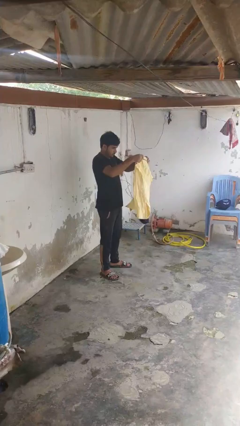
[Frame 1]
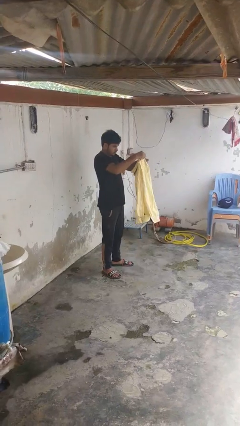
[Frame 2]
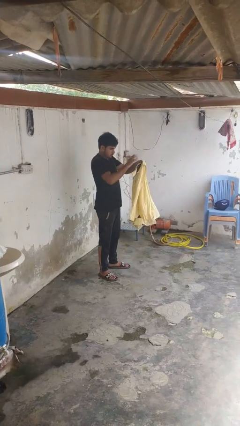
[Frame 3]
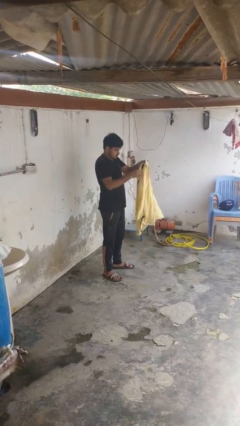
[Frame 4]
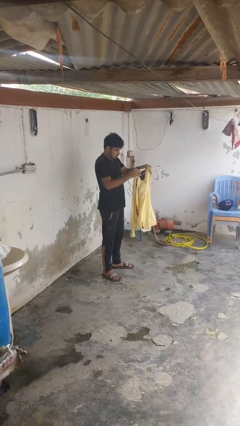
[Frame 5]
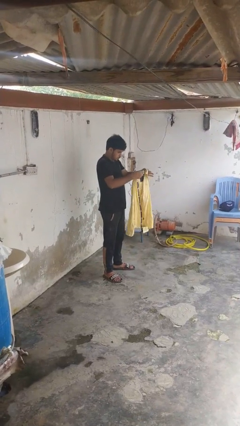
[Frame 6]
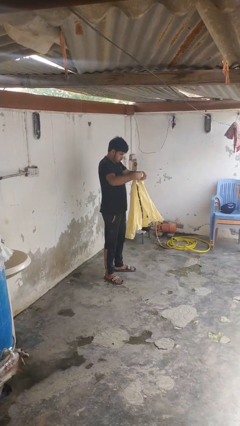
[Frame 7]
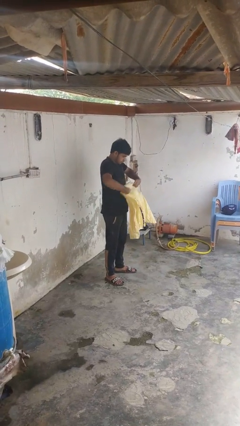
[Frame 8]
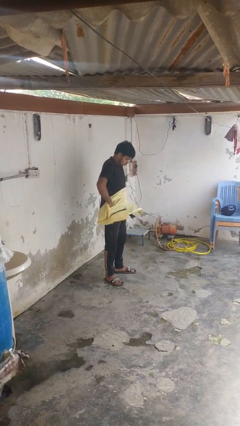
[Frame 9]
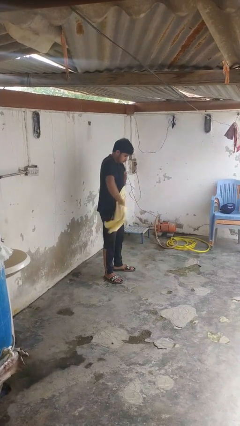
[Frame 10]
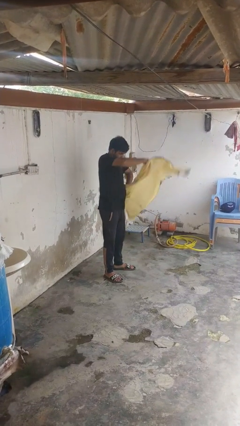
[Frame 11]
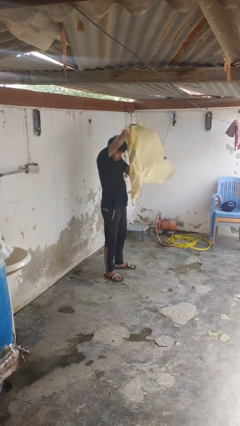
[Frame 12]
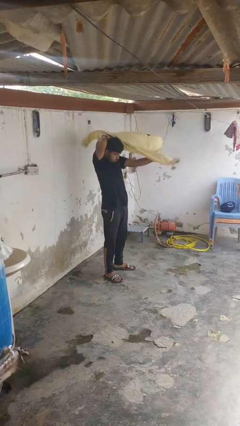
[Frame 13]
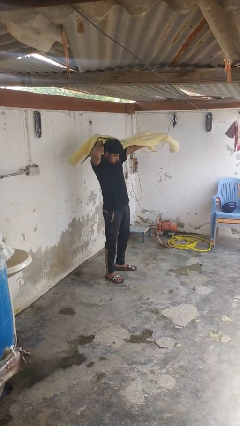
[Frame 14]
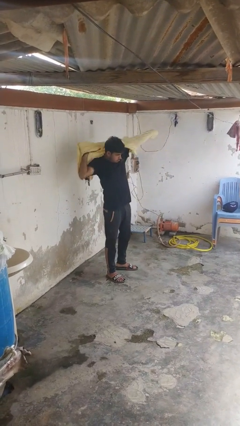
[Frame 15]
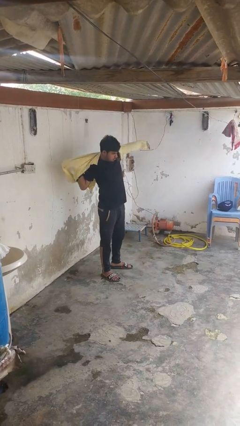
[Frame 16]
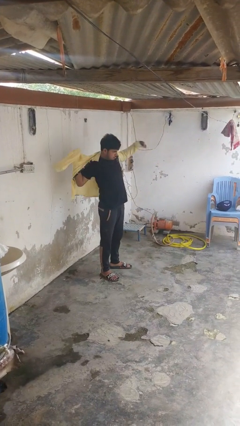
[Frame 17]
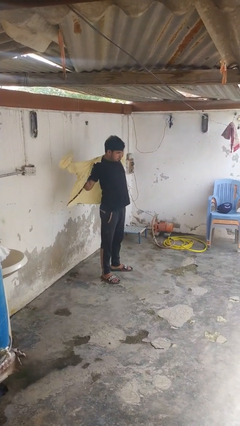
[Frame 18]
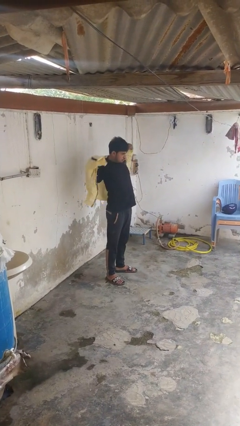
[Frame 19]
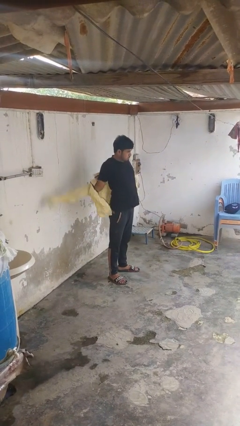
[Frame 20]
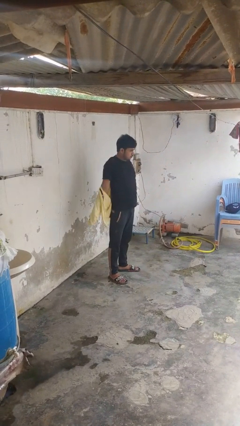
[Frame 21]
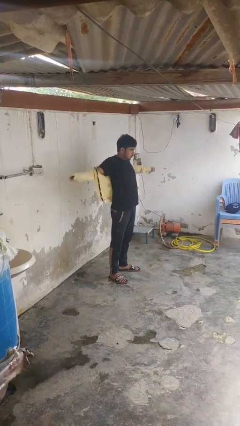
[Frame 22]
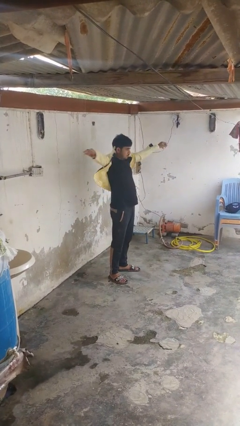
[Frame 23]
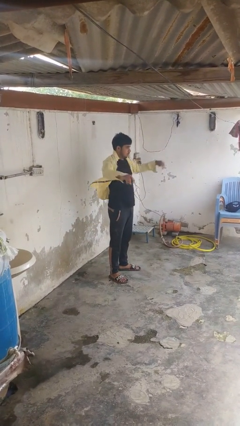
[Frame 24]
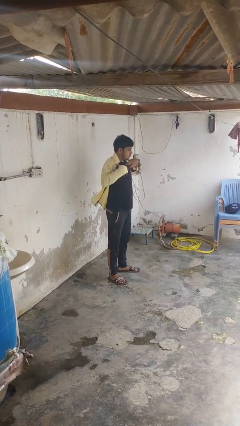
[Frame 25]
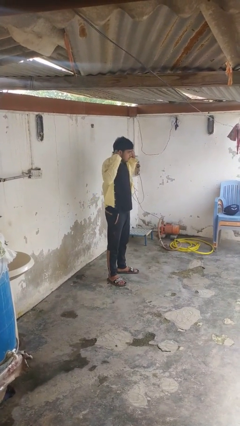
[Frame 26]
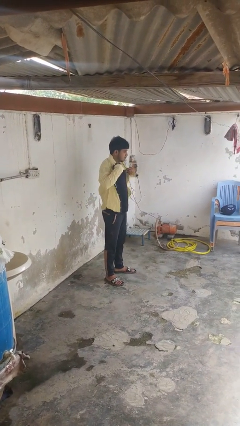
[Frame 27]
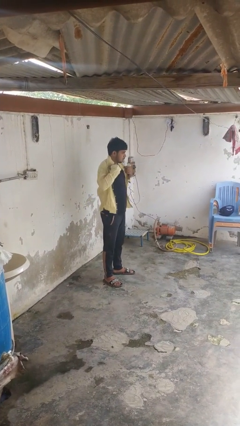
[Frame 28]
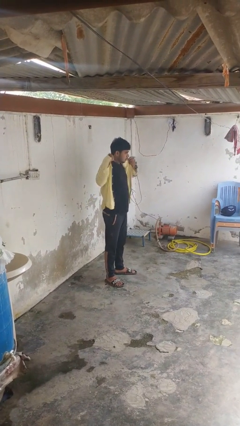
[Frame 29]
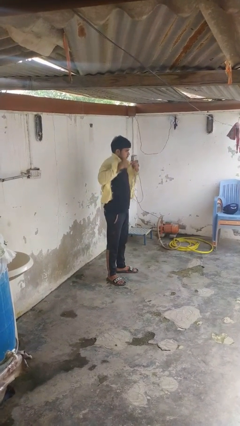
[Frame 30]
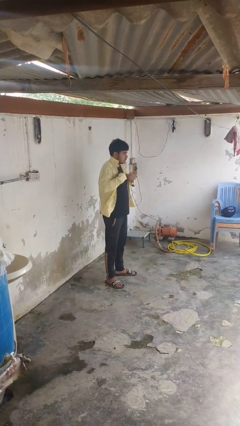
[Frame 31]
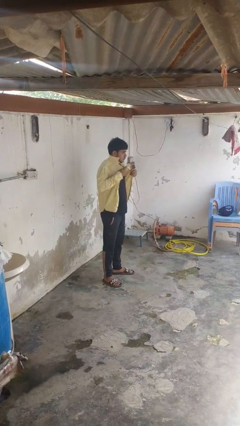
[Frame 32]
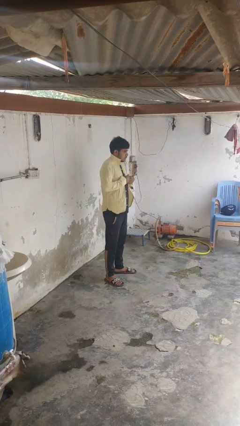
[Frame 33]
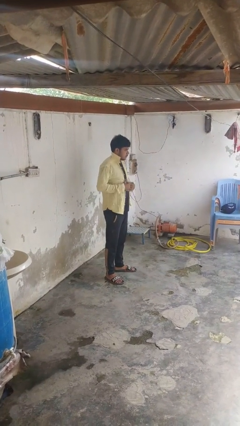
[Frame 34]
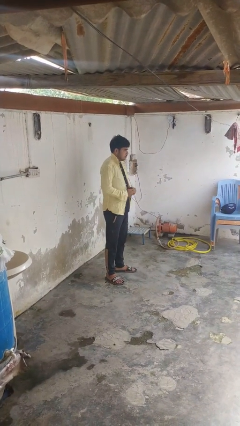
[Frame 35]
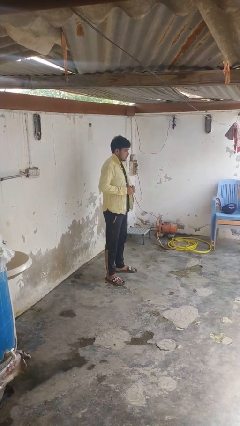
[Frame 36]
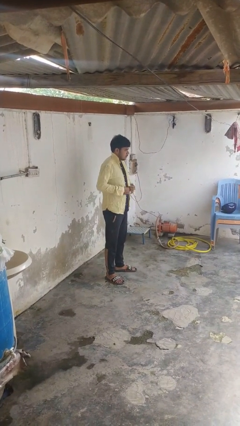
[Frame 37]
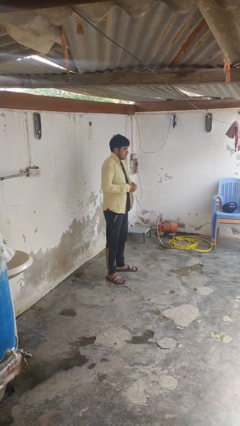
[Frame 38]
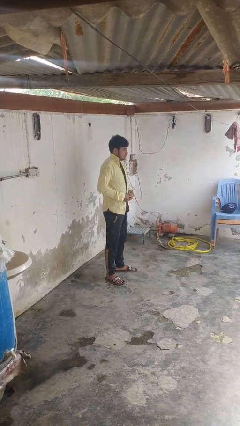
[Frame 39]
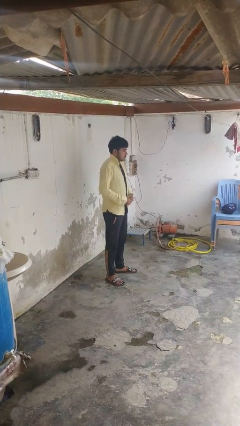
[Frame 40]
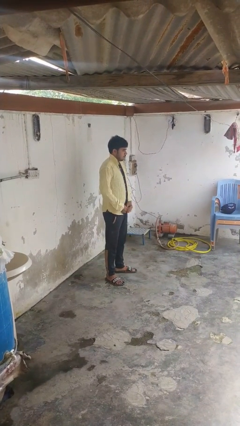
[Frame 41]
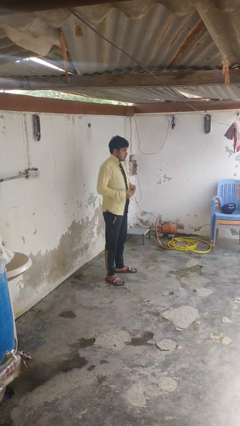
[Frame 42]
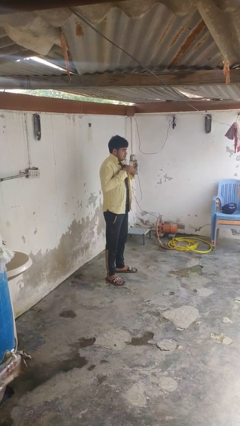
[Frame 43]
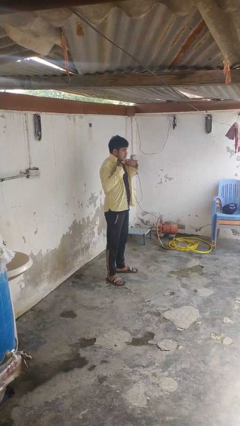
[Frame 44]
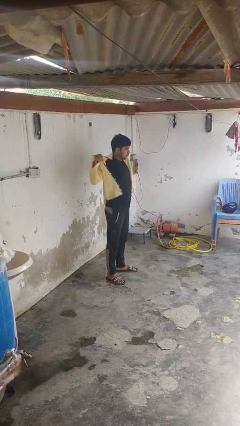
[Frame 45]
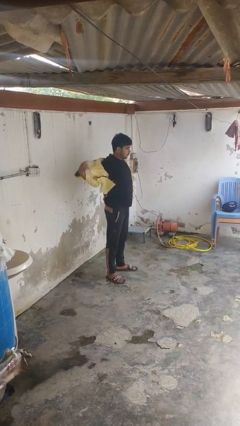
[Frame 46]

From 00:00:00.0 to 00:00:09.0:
person puts on shirt

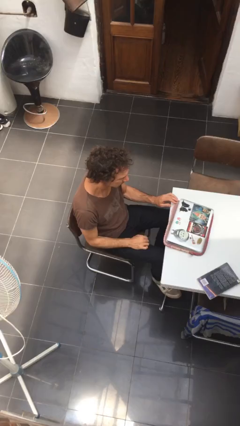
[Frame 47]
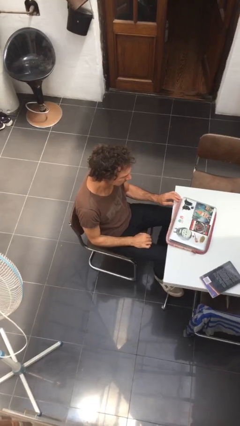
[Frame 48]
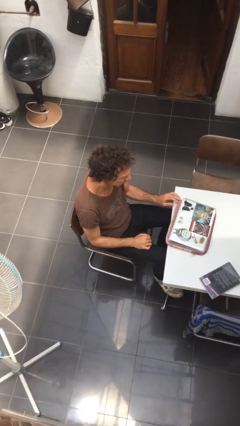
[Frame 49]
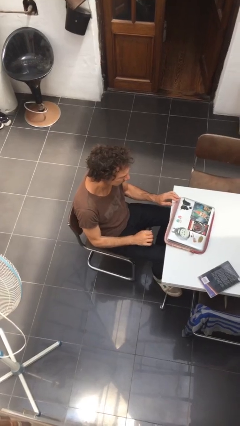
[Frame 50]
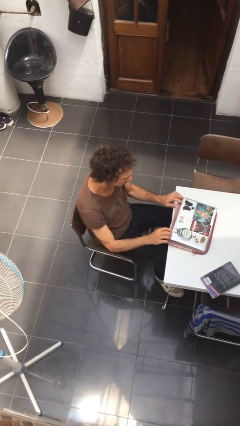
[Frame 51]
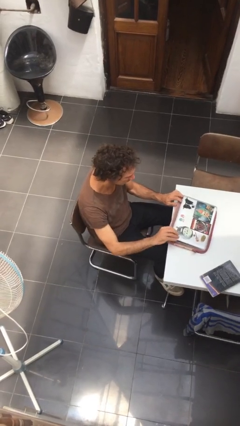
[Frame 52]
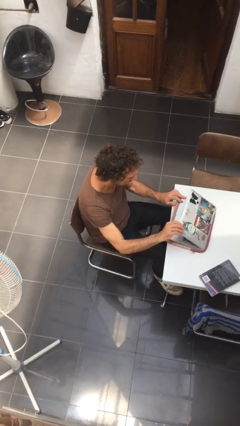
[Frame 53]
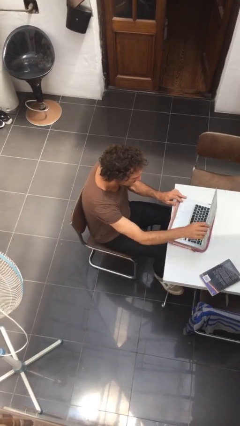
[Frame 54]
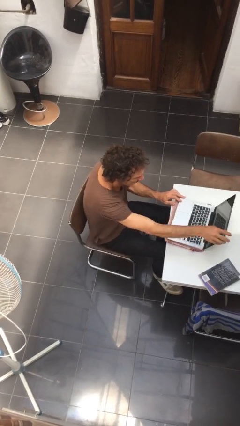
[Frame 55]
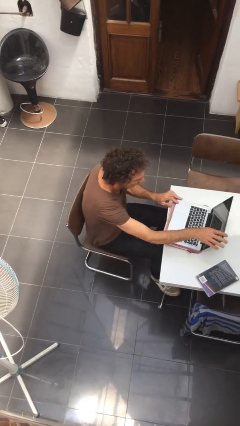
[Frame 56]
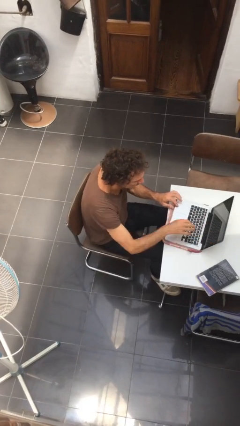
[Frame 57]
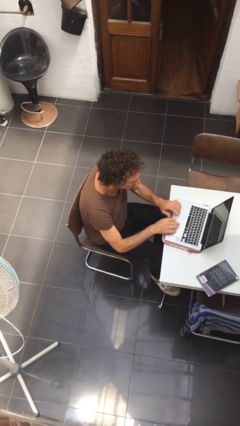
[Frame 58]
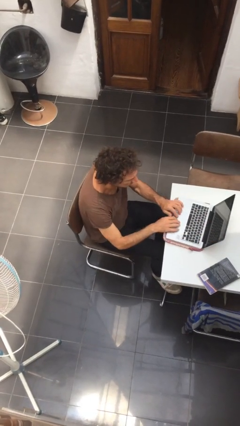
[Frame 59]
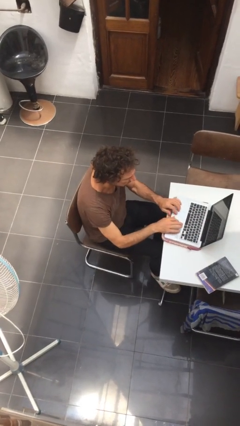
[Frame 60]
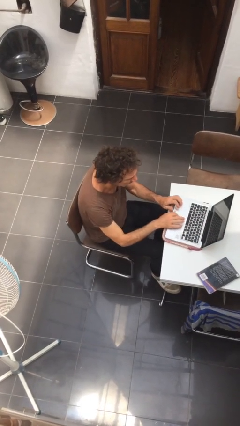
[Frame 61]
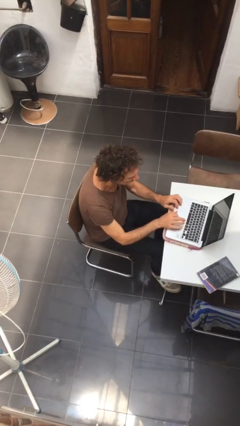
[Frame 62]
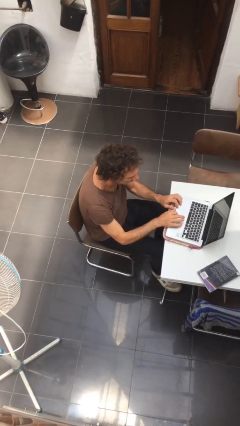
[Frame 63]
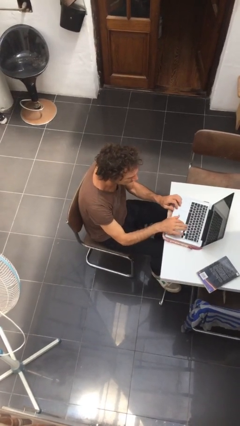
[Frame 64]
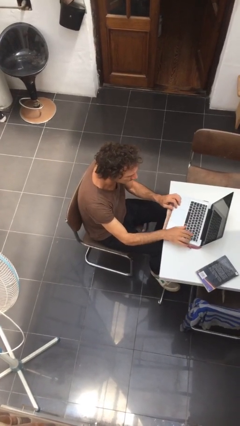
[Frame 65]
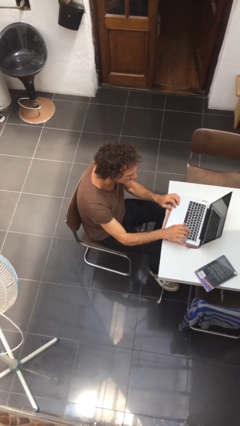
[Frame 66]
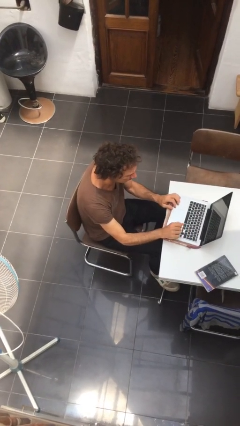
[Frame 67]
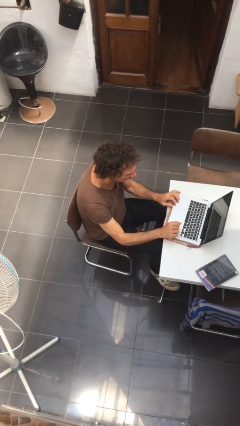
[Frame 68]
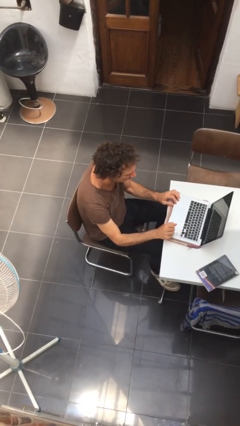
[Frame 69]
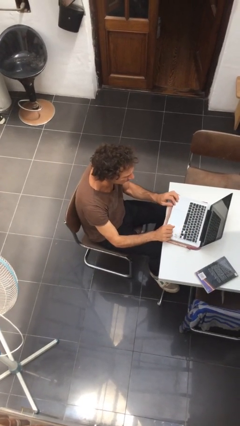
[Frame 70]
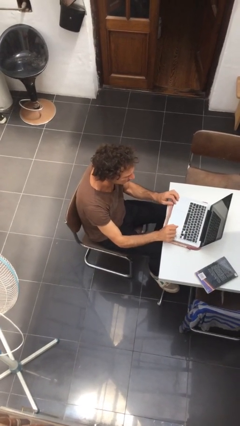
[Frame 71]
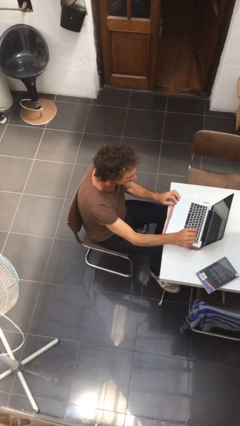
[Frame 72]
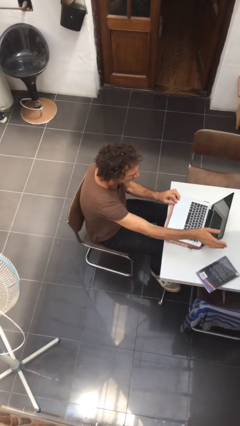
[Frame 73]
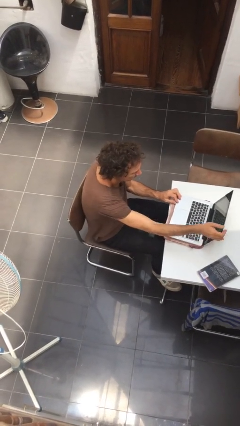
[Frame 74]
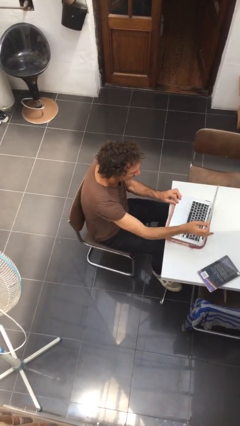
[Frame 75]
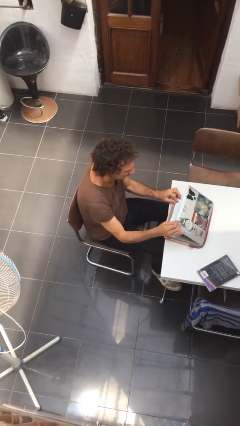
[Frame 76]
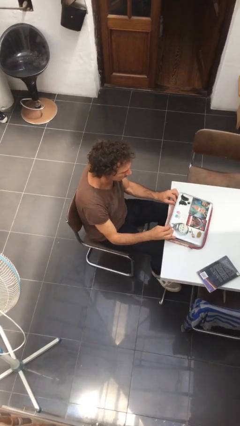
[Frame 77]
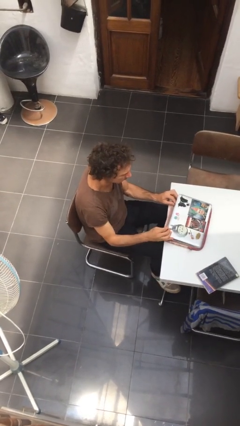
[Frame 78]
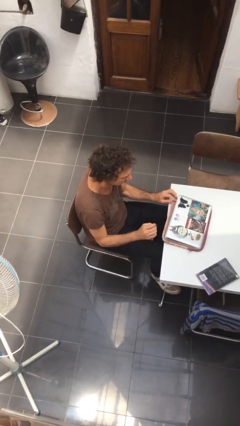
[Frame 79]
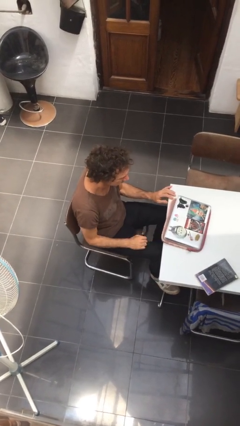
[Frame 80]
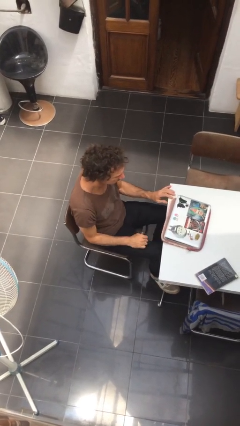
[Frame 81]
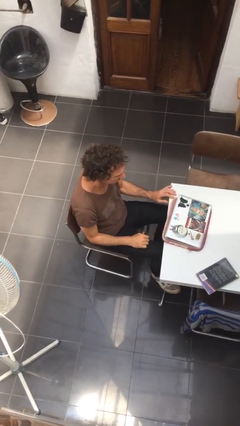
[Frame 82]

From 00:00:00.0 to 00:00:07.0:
person interacts with laptop

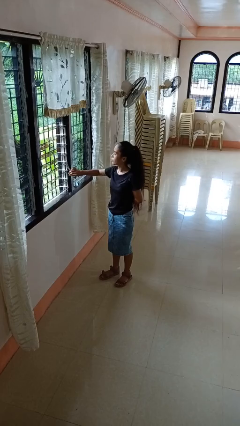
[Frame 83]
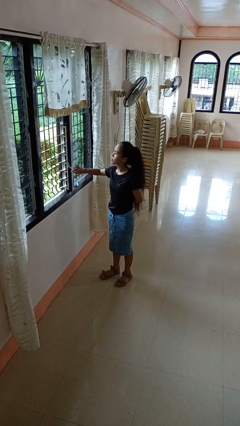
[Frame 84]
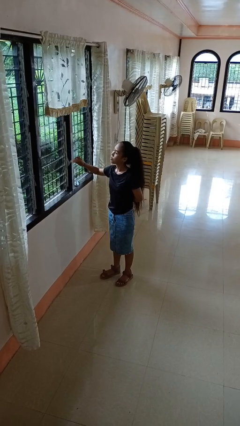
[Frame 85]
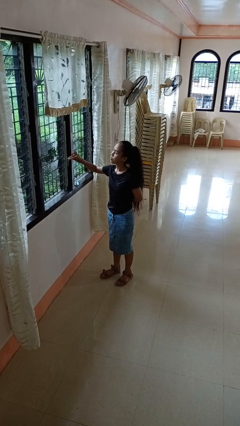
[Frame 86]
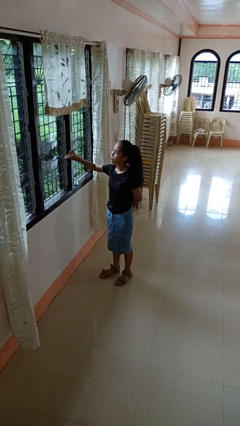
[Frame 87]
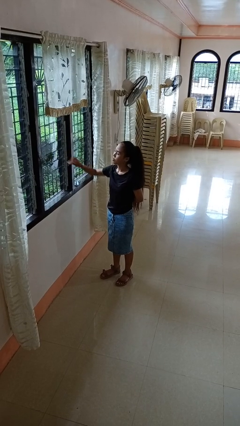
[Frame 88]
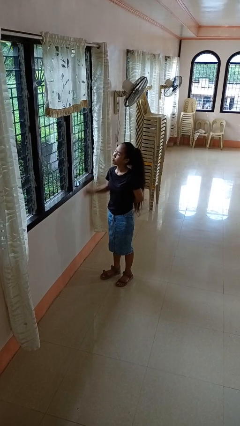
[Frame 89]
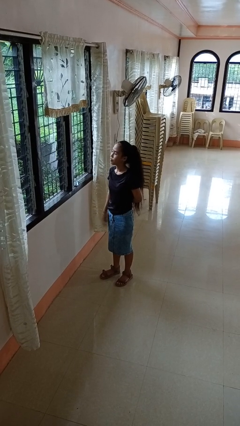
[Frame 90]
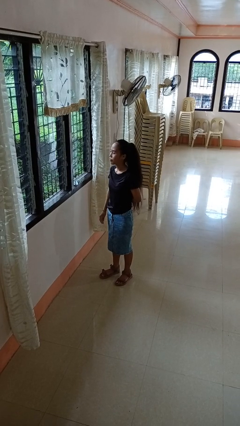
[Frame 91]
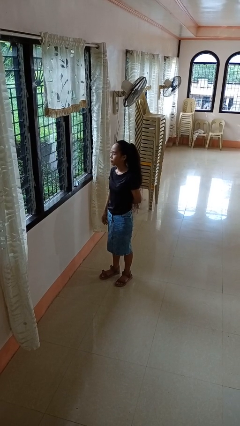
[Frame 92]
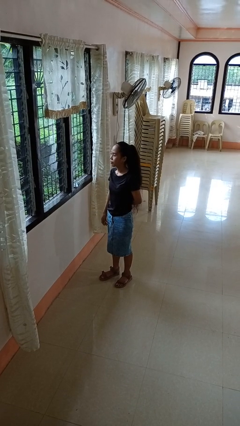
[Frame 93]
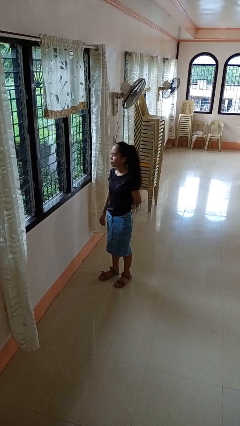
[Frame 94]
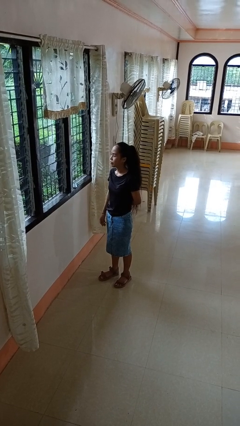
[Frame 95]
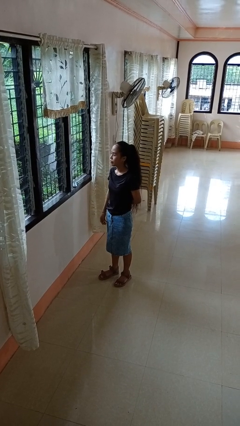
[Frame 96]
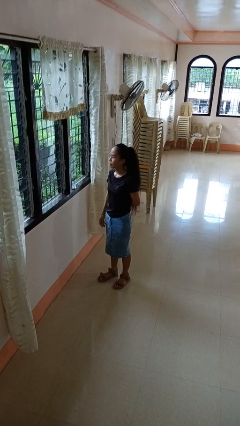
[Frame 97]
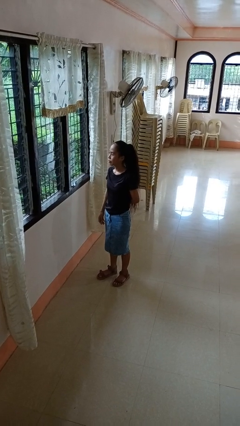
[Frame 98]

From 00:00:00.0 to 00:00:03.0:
person closes home window
